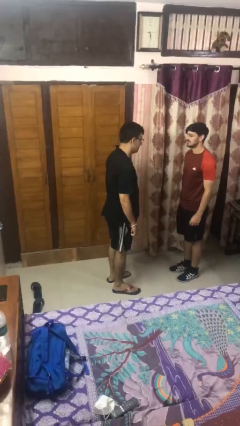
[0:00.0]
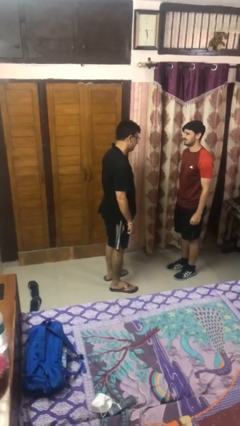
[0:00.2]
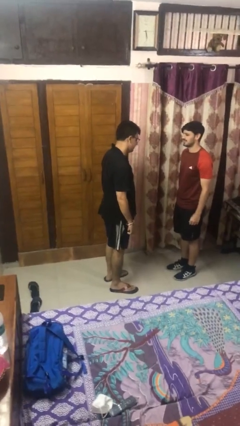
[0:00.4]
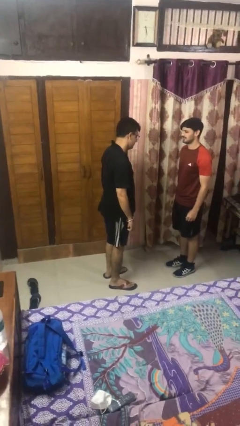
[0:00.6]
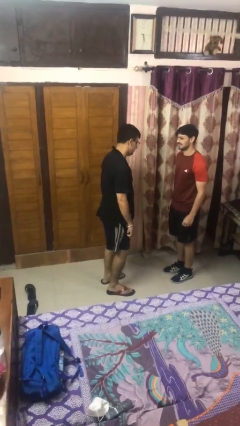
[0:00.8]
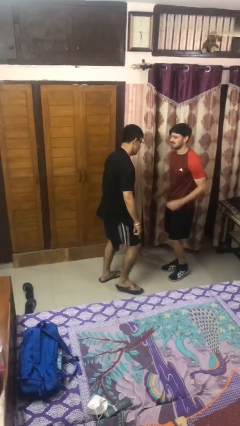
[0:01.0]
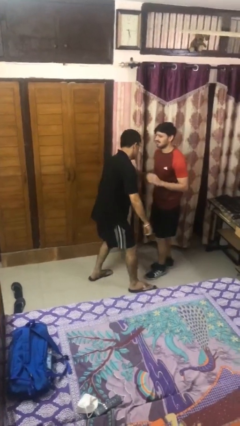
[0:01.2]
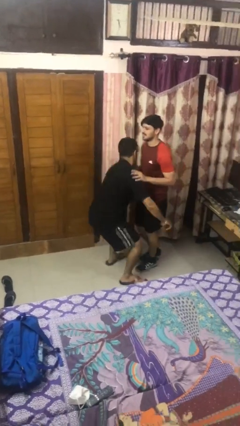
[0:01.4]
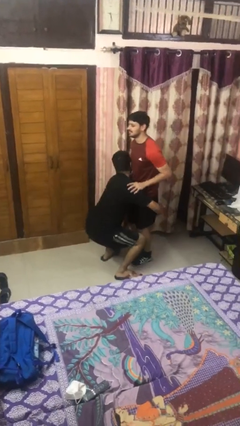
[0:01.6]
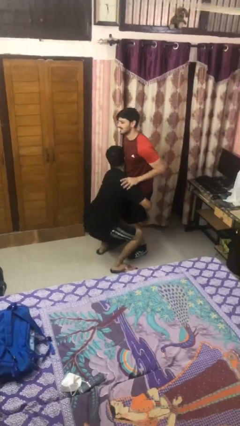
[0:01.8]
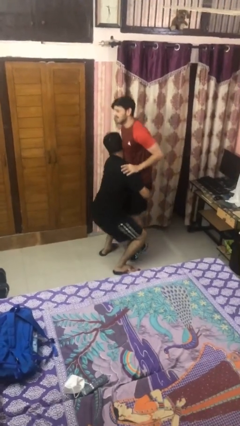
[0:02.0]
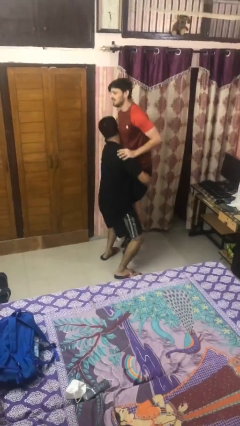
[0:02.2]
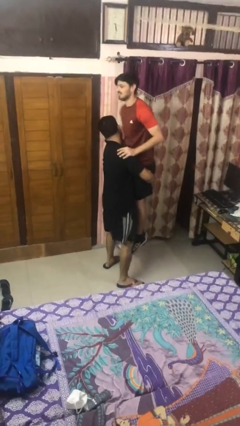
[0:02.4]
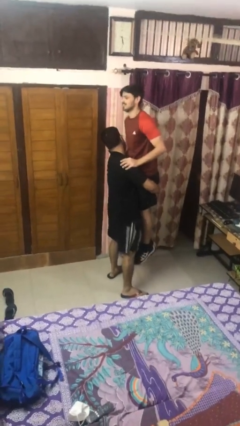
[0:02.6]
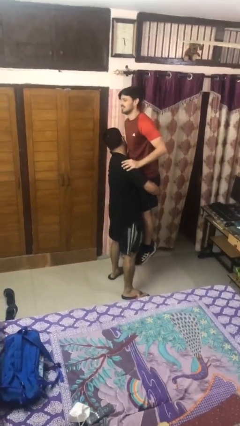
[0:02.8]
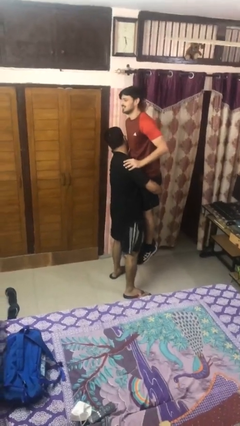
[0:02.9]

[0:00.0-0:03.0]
person picks up person

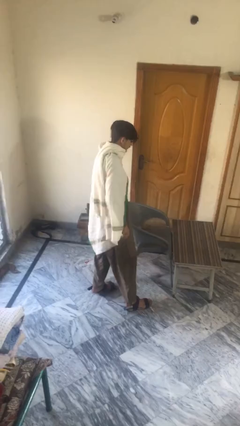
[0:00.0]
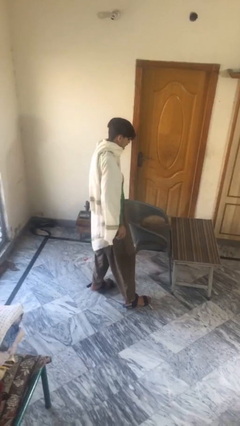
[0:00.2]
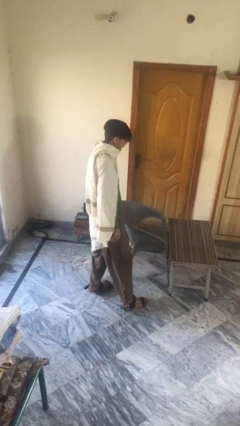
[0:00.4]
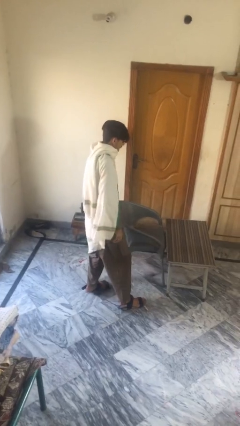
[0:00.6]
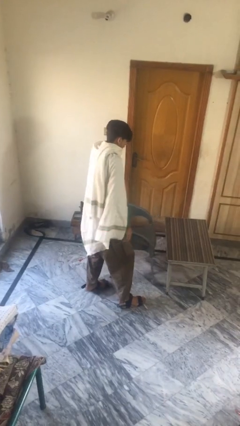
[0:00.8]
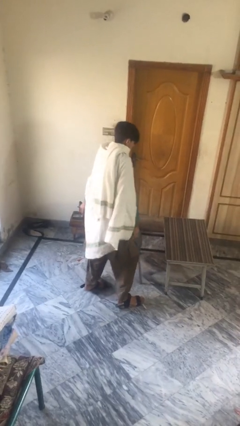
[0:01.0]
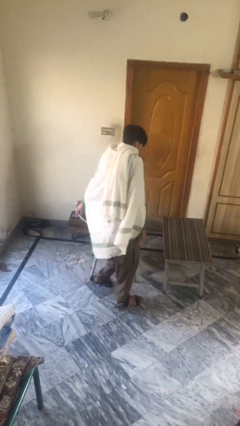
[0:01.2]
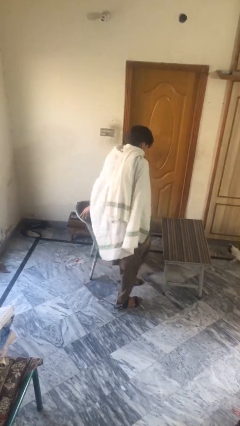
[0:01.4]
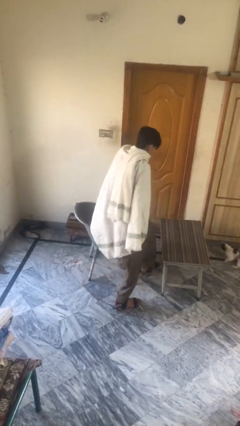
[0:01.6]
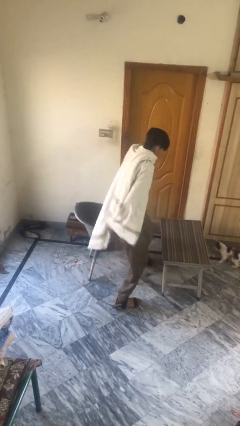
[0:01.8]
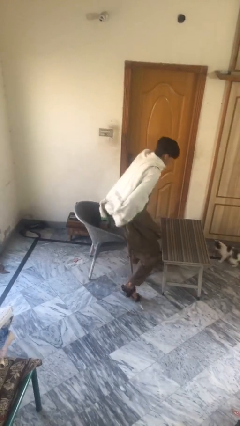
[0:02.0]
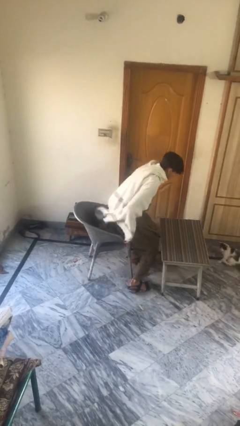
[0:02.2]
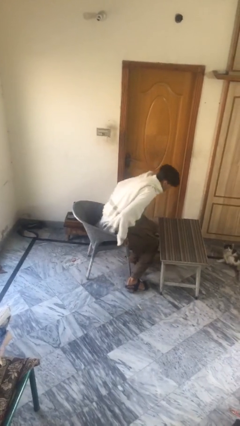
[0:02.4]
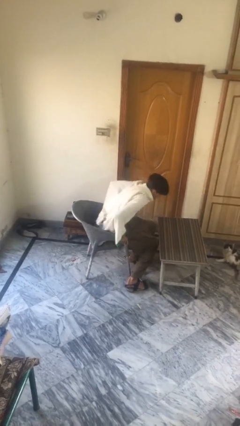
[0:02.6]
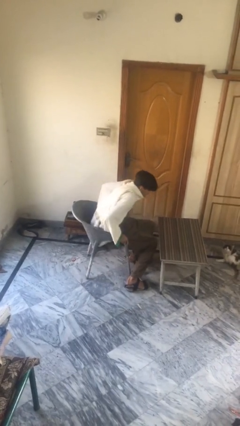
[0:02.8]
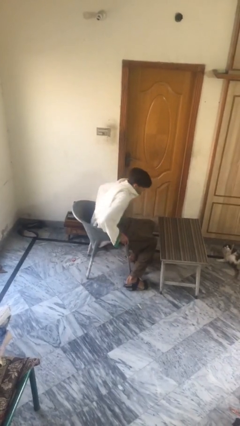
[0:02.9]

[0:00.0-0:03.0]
person sits down

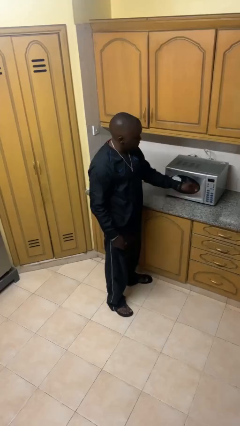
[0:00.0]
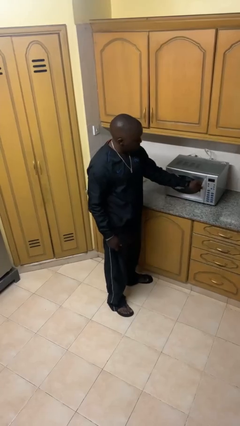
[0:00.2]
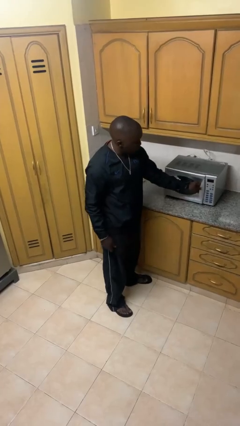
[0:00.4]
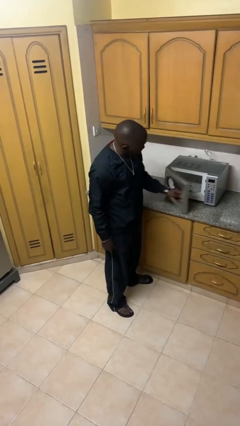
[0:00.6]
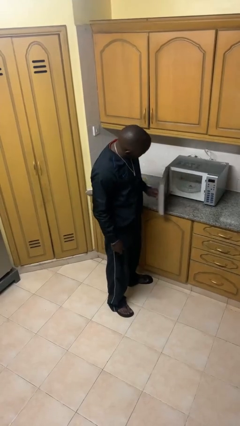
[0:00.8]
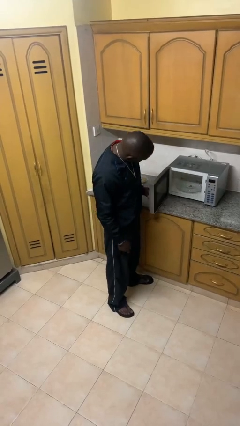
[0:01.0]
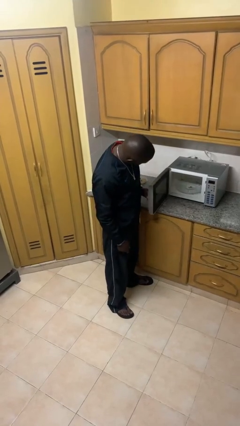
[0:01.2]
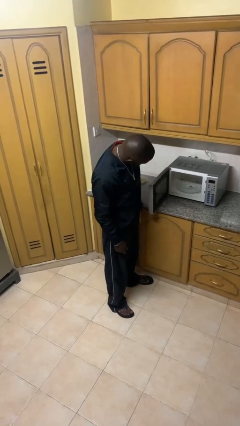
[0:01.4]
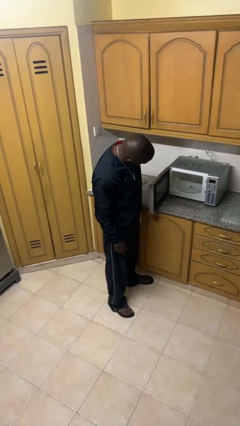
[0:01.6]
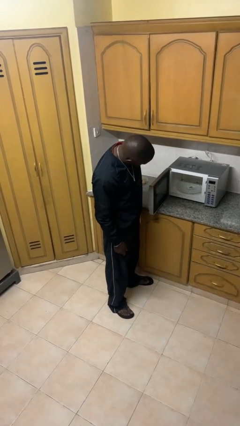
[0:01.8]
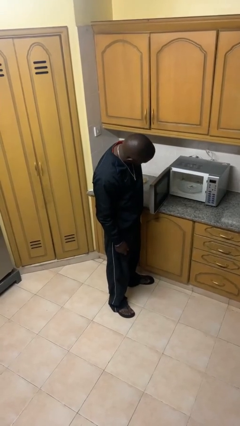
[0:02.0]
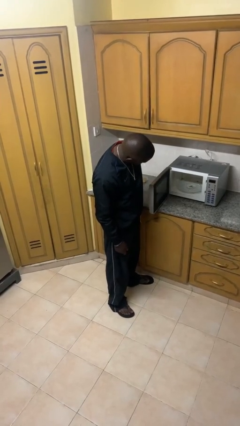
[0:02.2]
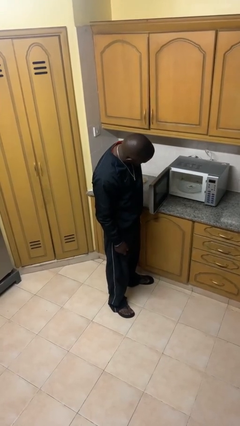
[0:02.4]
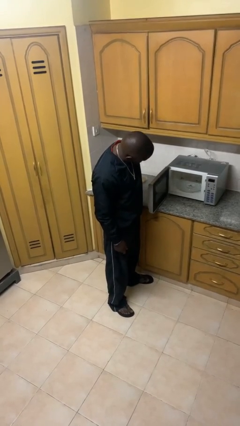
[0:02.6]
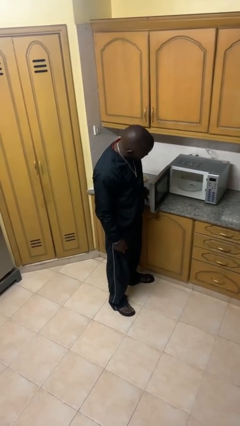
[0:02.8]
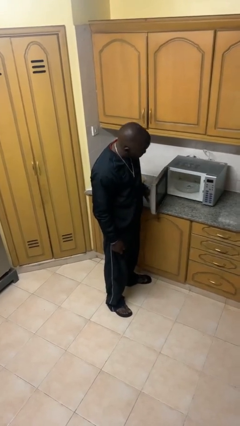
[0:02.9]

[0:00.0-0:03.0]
person opens microwave

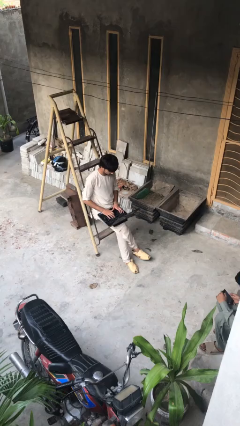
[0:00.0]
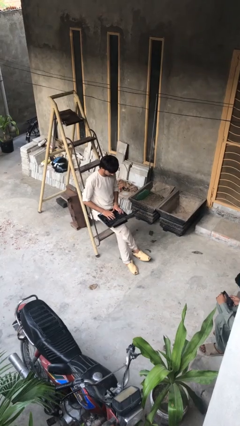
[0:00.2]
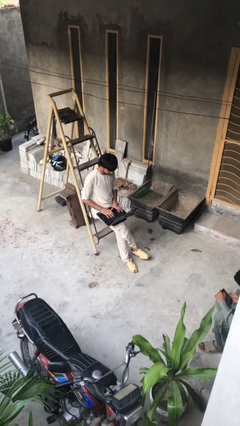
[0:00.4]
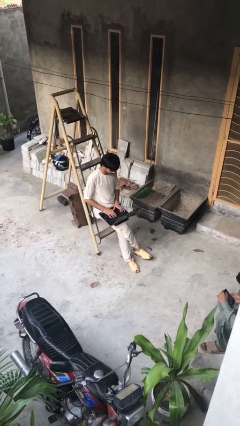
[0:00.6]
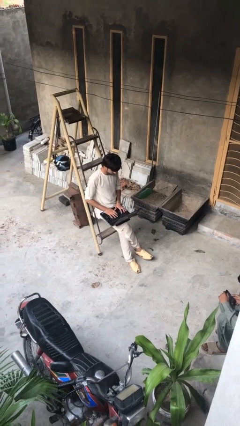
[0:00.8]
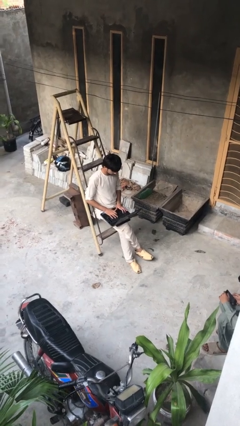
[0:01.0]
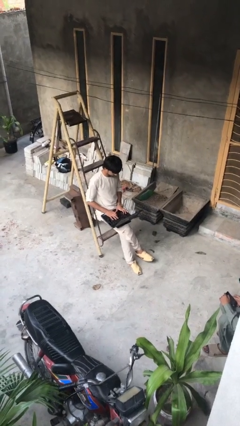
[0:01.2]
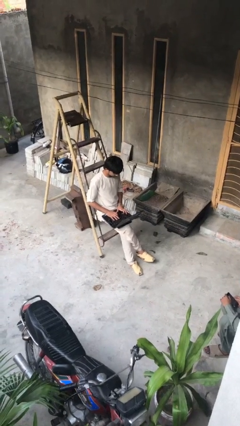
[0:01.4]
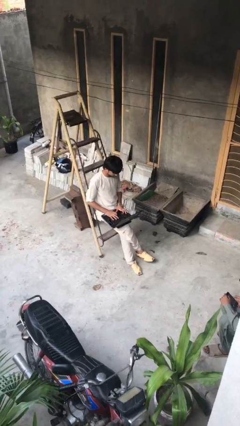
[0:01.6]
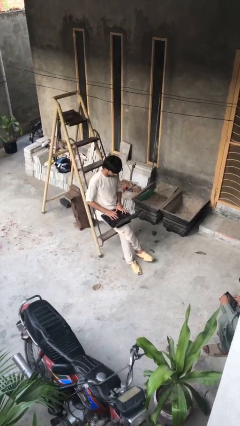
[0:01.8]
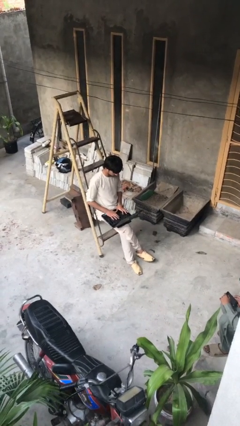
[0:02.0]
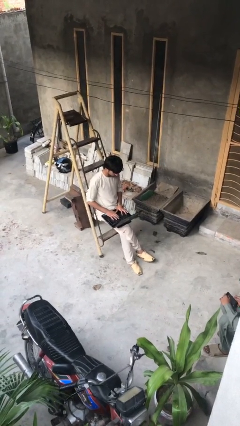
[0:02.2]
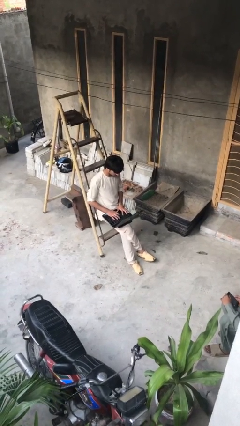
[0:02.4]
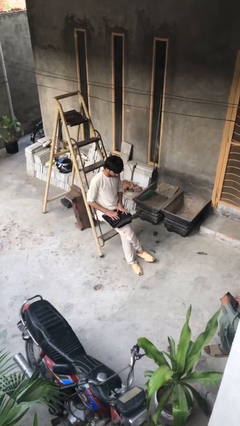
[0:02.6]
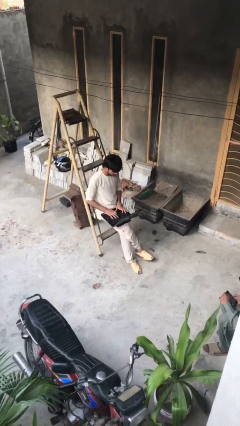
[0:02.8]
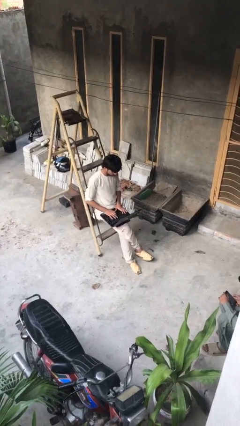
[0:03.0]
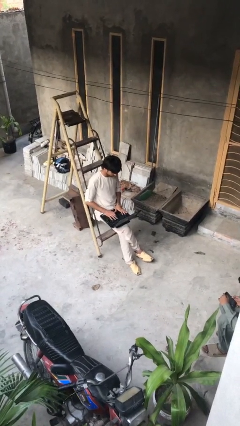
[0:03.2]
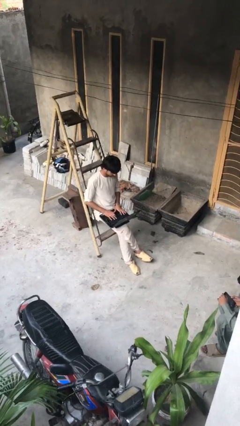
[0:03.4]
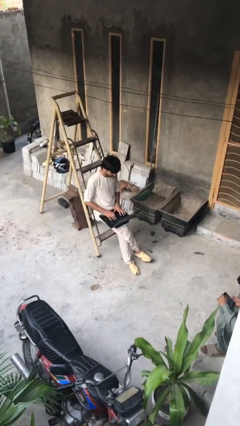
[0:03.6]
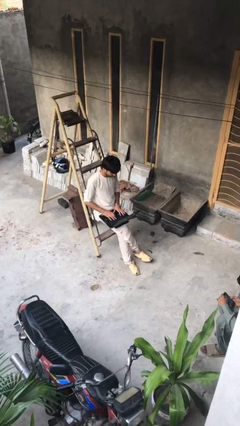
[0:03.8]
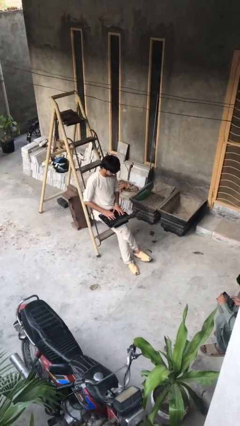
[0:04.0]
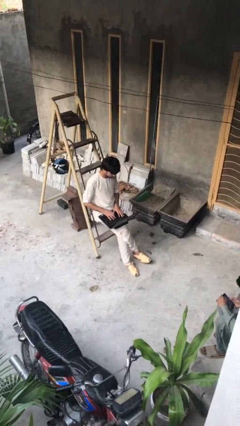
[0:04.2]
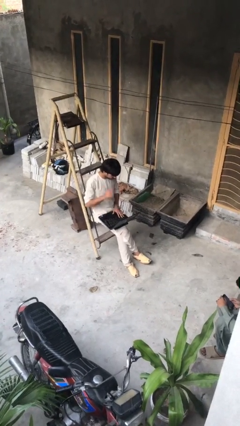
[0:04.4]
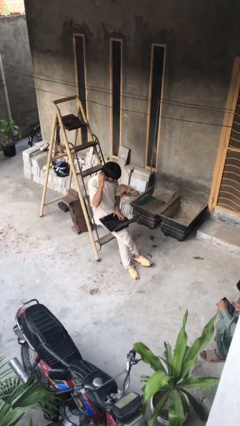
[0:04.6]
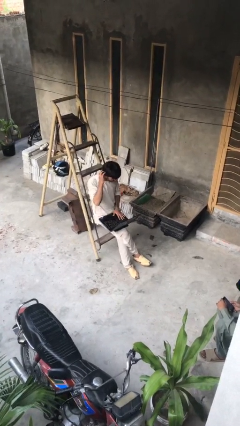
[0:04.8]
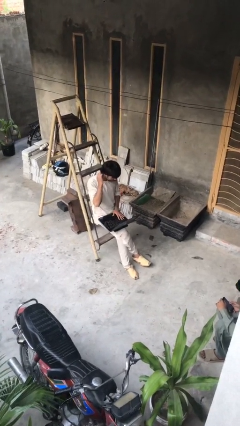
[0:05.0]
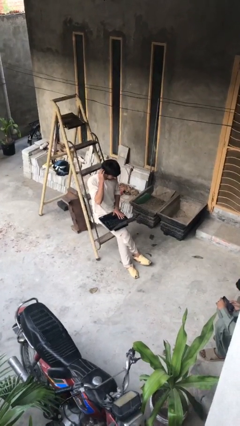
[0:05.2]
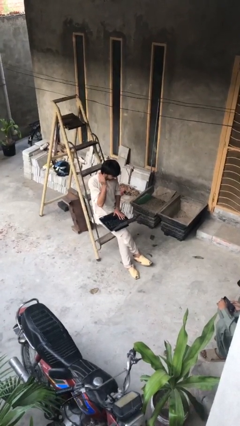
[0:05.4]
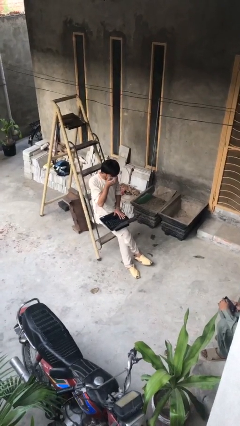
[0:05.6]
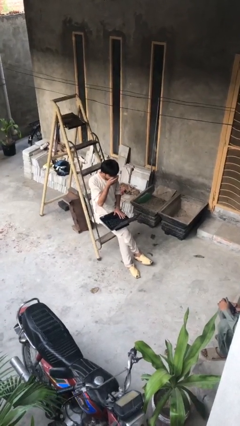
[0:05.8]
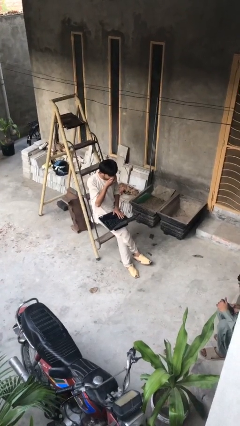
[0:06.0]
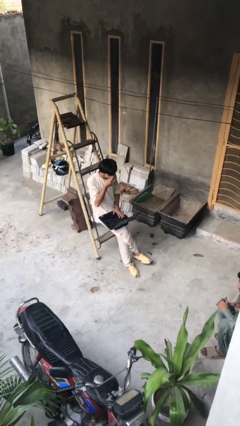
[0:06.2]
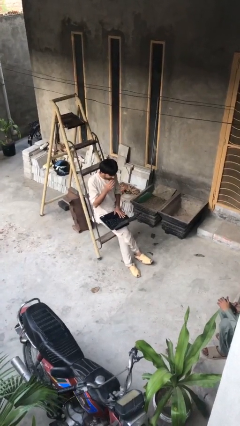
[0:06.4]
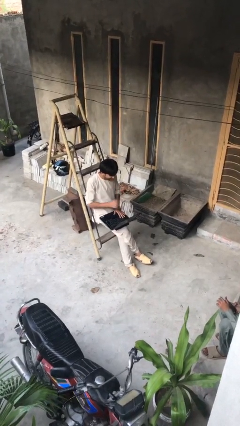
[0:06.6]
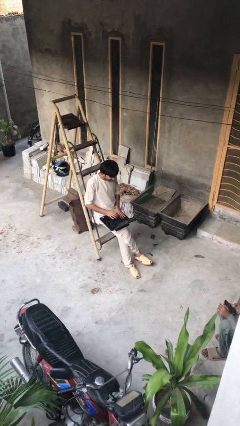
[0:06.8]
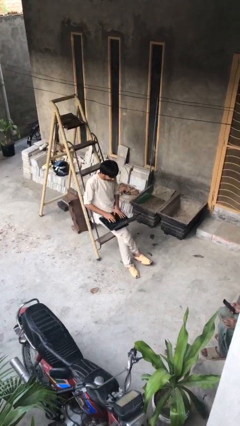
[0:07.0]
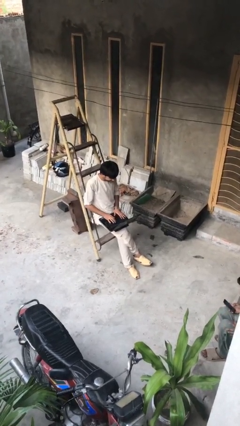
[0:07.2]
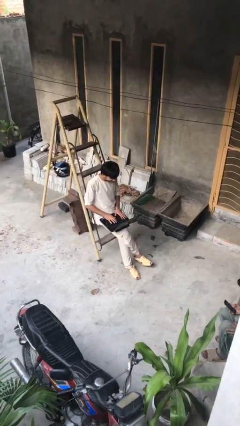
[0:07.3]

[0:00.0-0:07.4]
person interacts with laptop

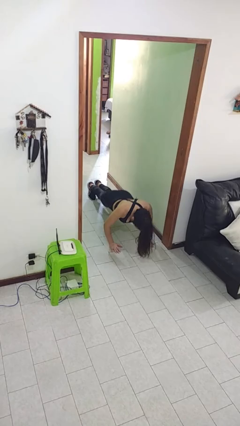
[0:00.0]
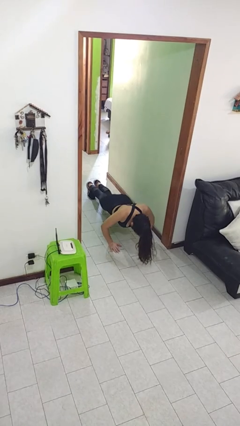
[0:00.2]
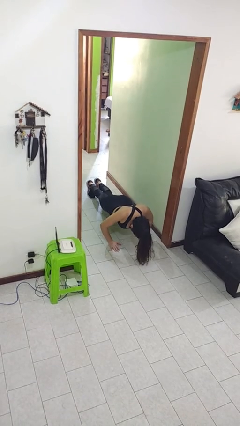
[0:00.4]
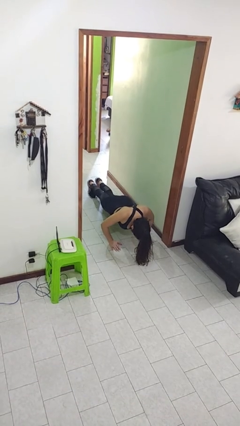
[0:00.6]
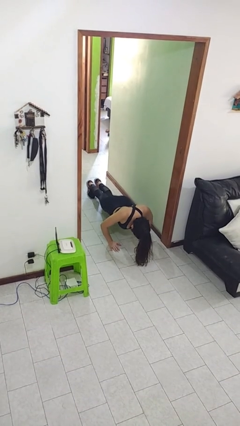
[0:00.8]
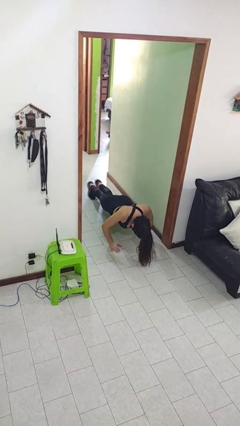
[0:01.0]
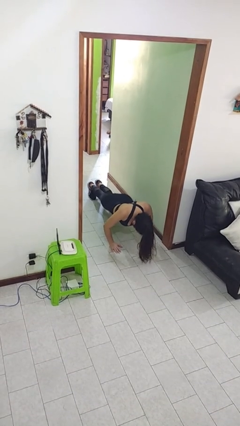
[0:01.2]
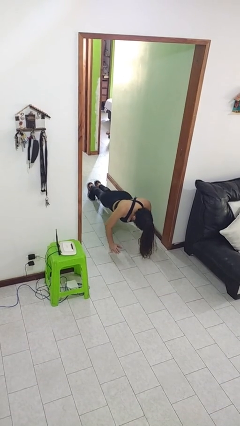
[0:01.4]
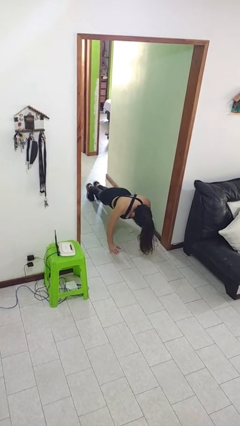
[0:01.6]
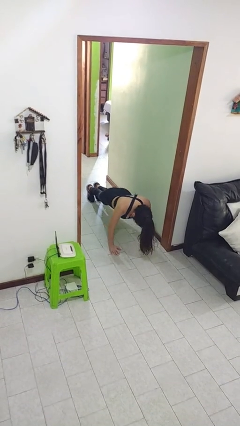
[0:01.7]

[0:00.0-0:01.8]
person exercises with pushup
